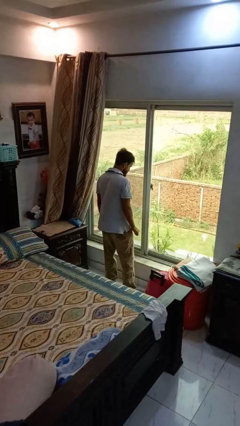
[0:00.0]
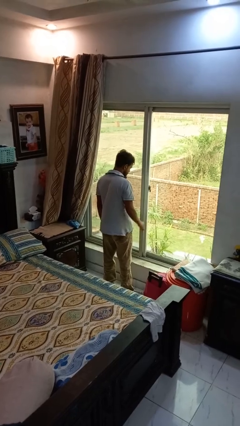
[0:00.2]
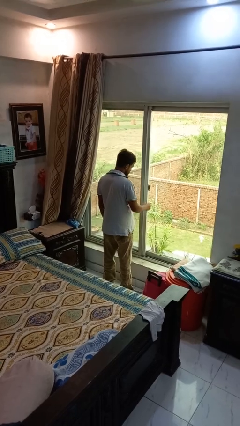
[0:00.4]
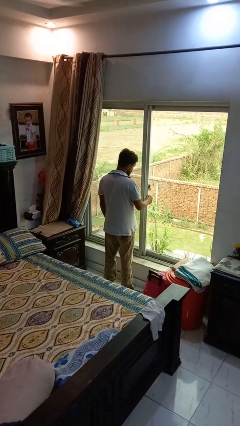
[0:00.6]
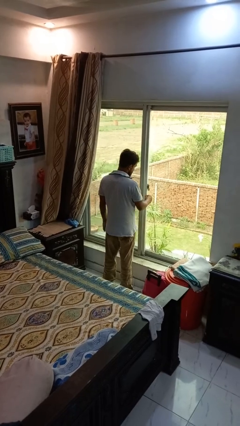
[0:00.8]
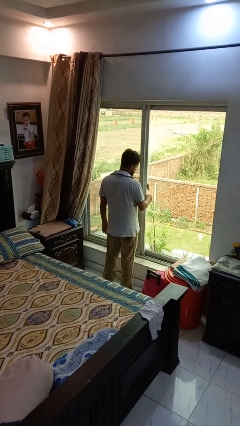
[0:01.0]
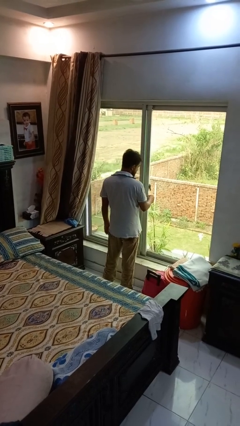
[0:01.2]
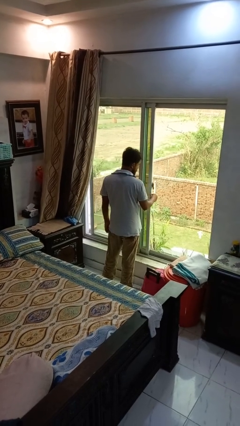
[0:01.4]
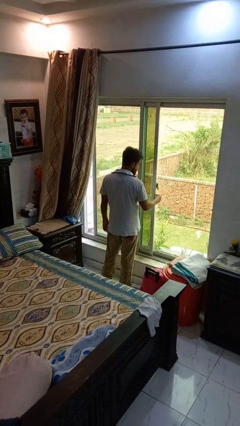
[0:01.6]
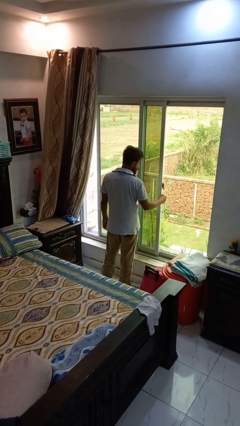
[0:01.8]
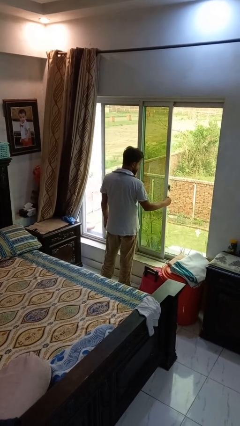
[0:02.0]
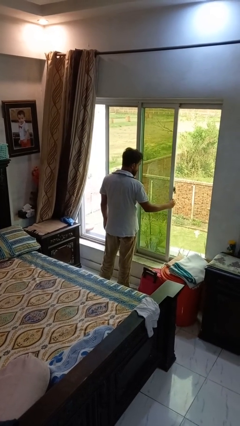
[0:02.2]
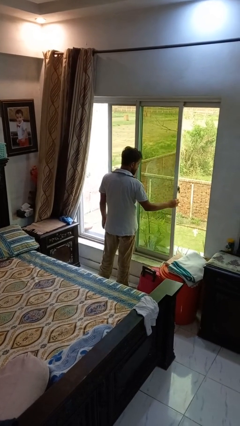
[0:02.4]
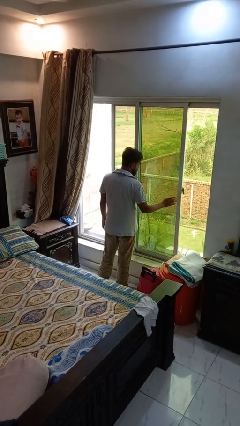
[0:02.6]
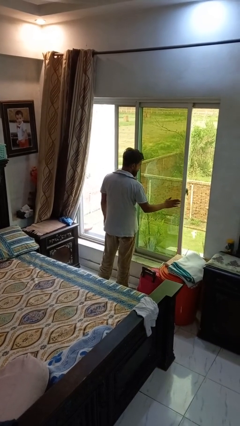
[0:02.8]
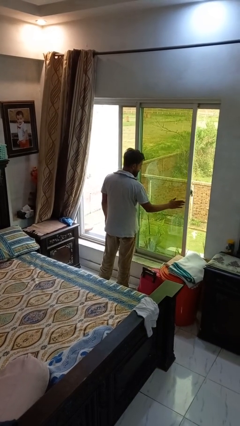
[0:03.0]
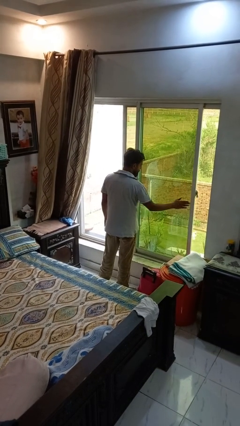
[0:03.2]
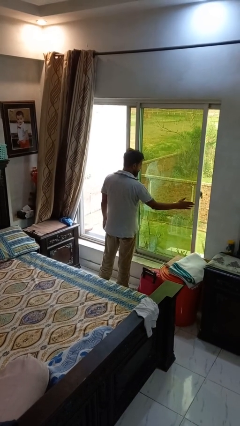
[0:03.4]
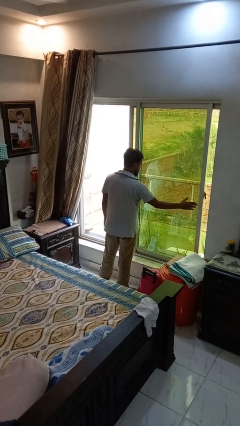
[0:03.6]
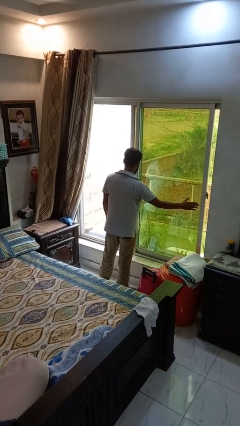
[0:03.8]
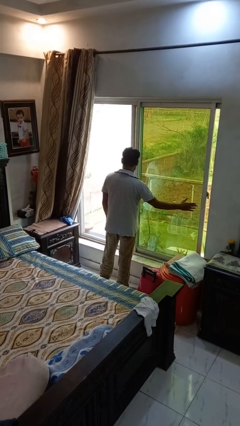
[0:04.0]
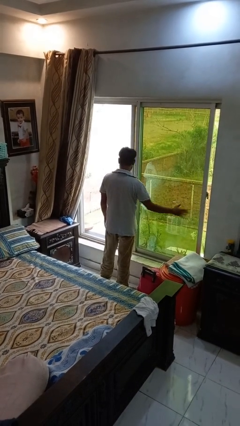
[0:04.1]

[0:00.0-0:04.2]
person opens sliding door

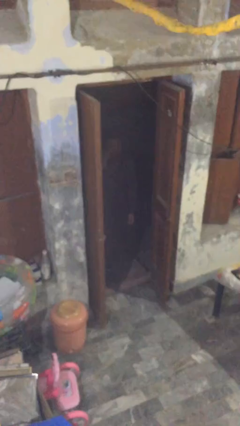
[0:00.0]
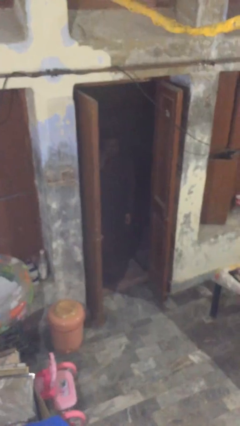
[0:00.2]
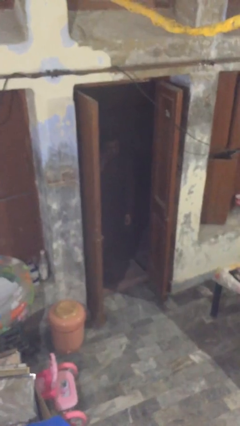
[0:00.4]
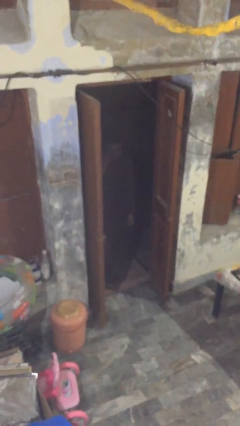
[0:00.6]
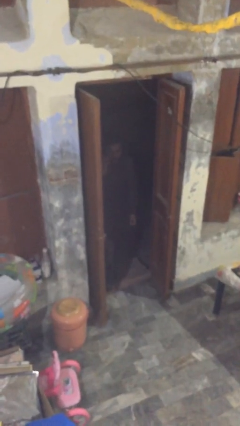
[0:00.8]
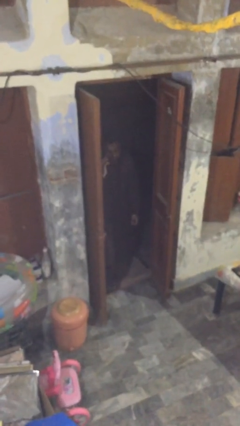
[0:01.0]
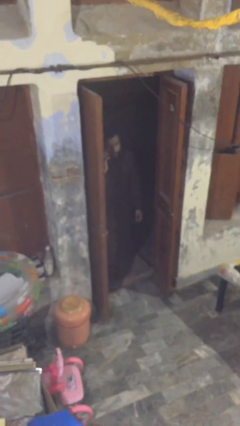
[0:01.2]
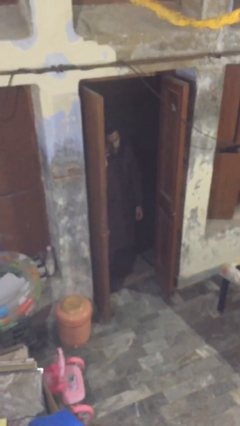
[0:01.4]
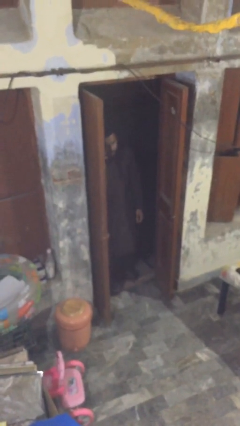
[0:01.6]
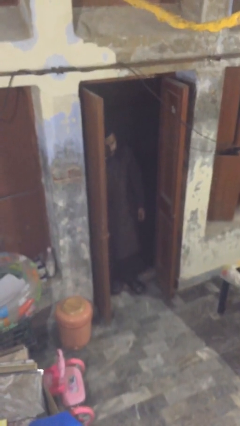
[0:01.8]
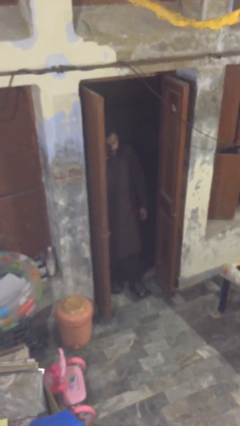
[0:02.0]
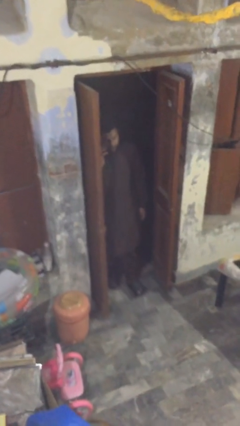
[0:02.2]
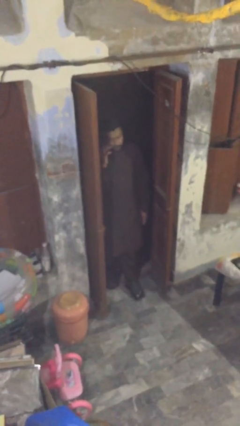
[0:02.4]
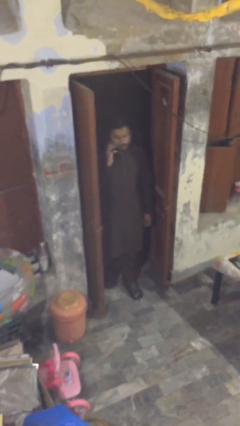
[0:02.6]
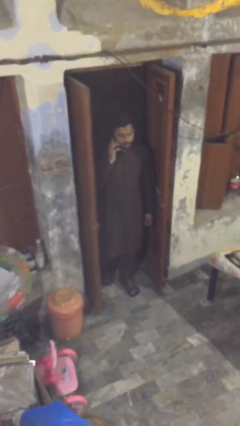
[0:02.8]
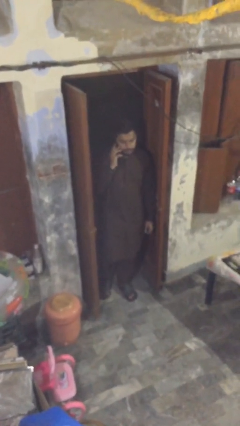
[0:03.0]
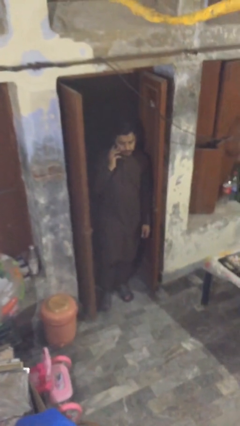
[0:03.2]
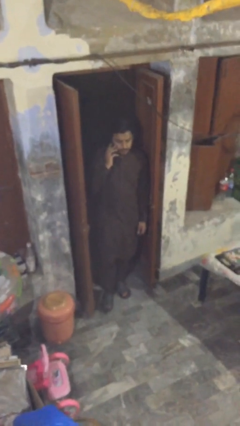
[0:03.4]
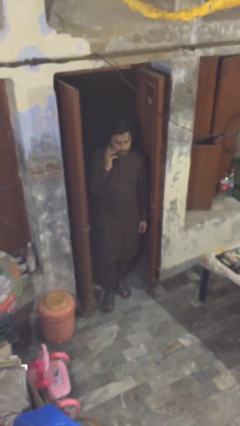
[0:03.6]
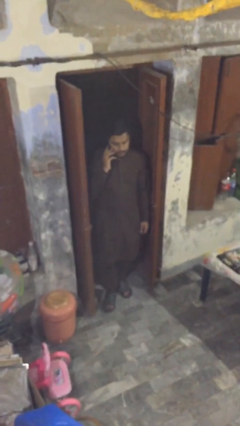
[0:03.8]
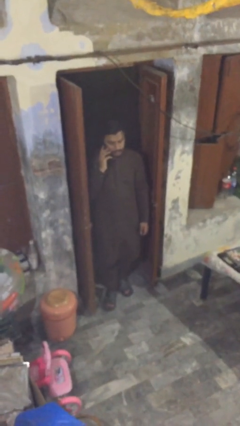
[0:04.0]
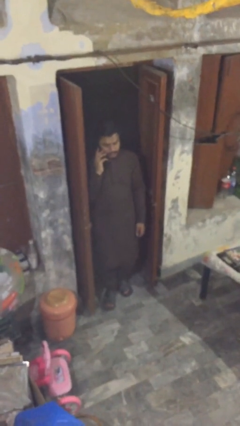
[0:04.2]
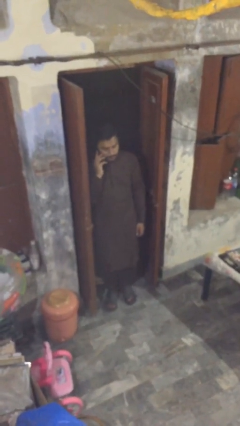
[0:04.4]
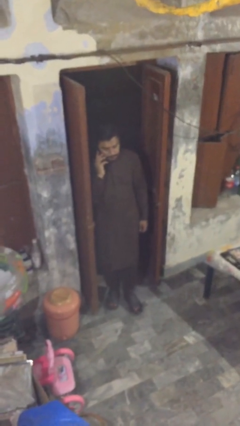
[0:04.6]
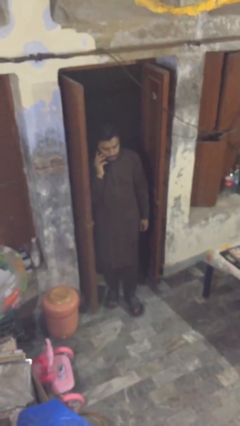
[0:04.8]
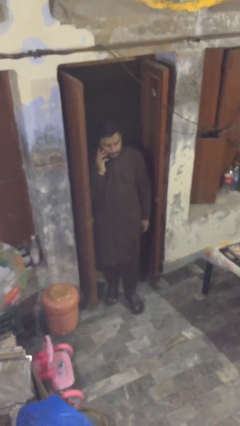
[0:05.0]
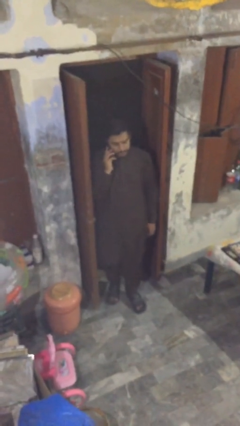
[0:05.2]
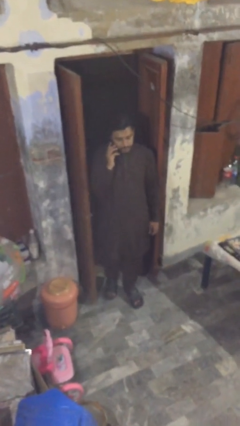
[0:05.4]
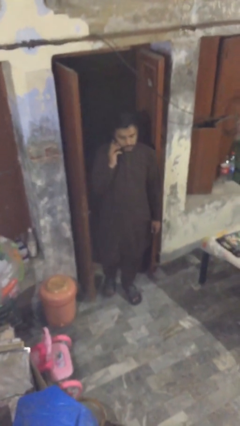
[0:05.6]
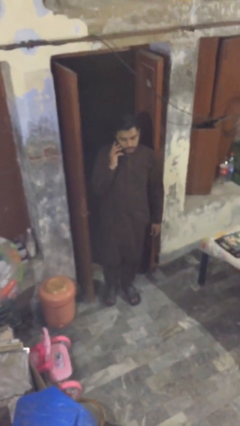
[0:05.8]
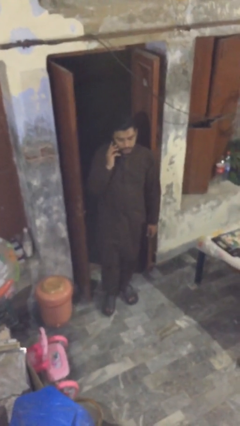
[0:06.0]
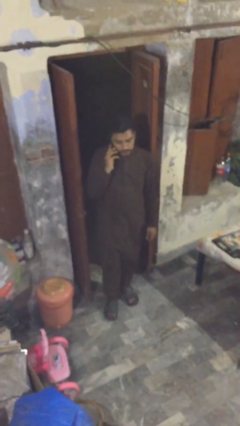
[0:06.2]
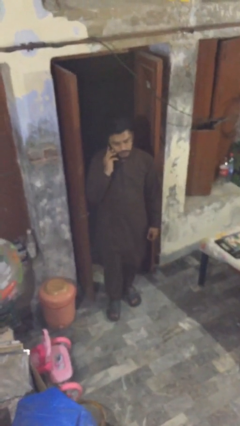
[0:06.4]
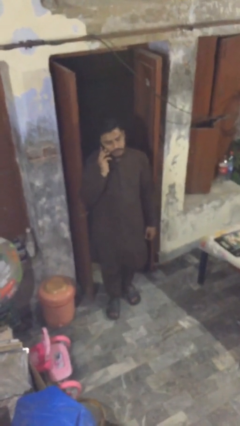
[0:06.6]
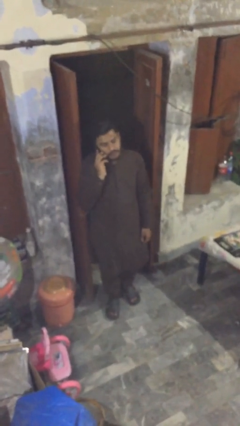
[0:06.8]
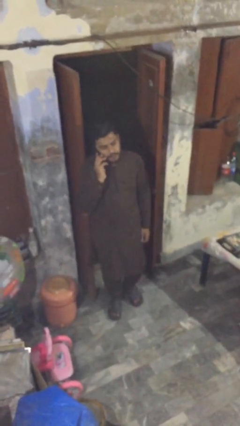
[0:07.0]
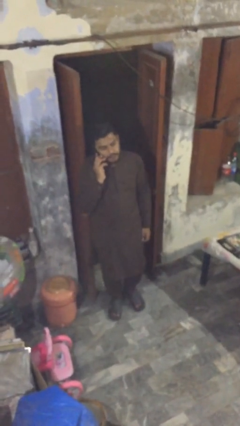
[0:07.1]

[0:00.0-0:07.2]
person enters scene through structure

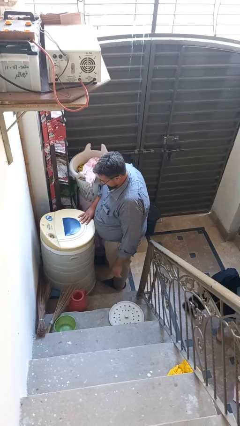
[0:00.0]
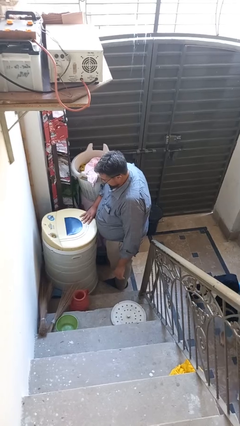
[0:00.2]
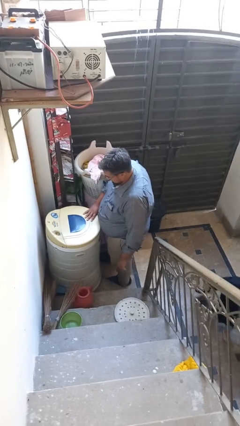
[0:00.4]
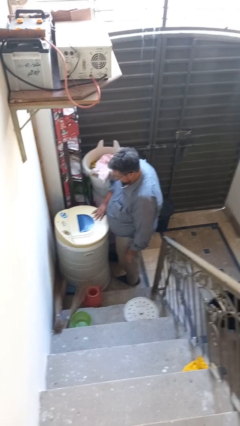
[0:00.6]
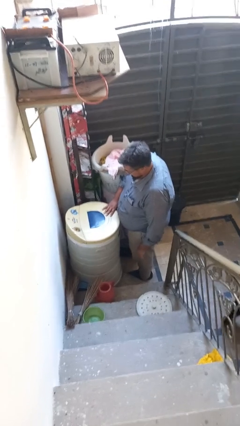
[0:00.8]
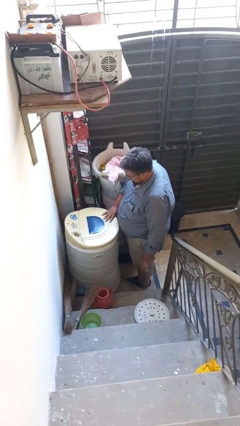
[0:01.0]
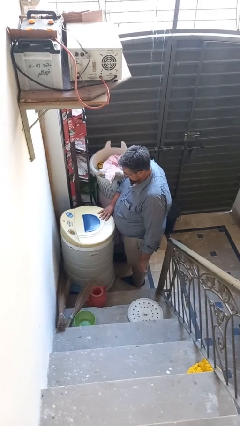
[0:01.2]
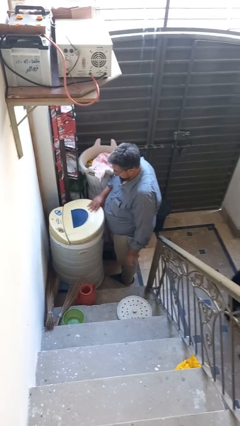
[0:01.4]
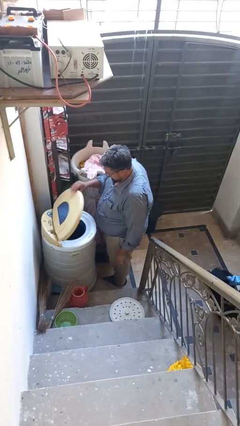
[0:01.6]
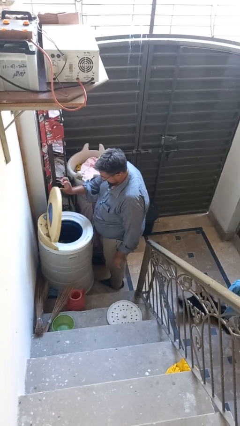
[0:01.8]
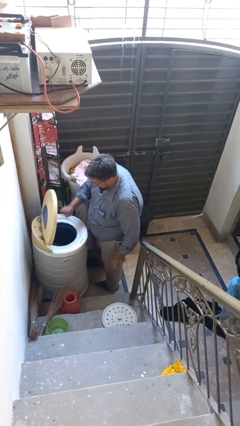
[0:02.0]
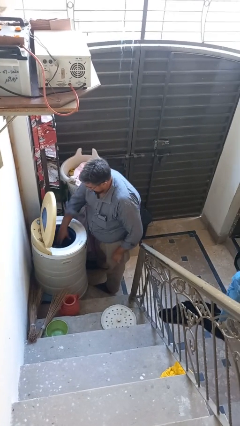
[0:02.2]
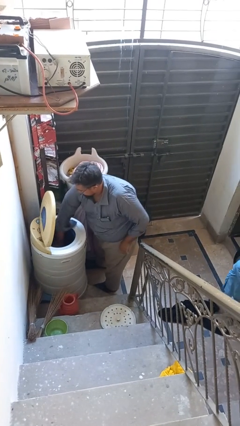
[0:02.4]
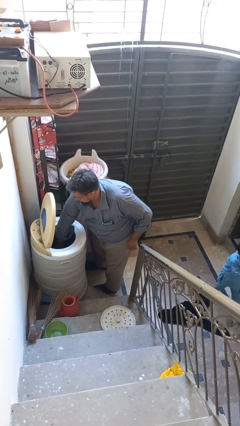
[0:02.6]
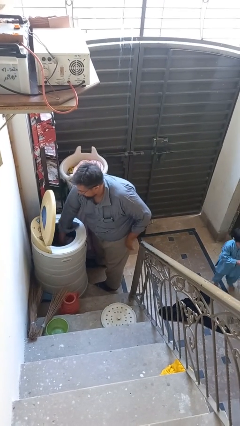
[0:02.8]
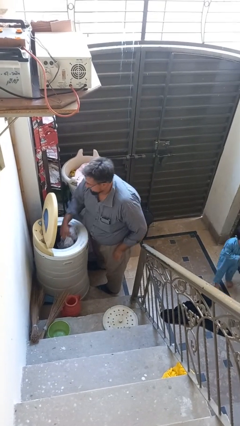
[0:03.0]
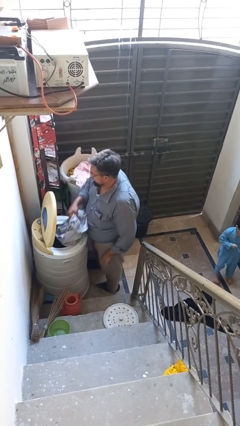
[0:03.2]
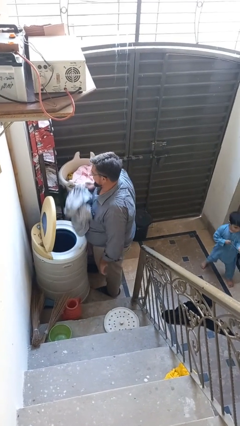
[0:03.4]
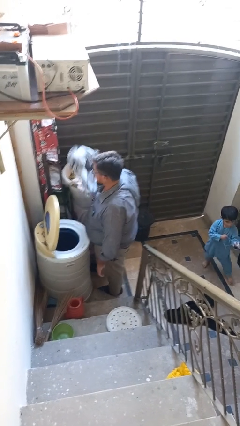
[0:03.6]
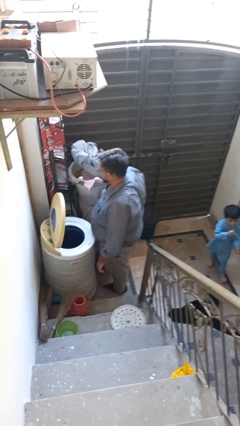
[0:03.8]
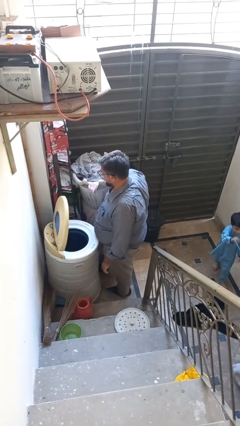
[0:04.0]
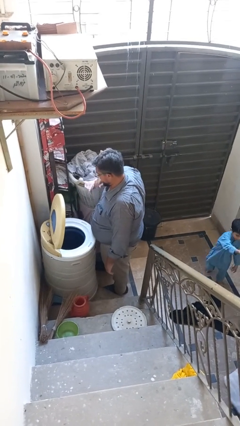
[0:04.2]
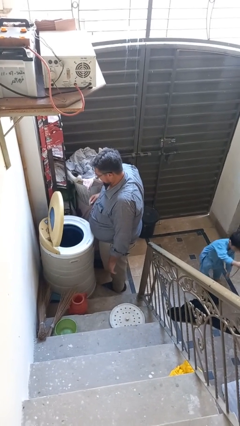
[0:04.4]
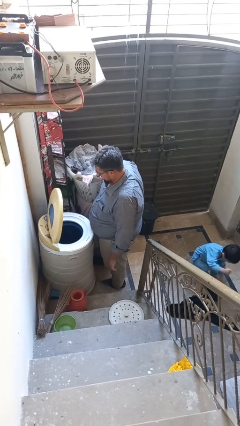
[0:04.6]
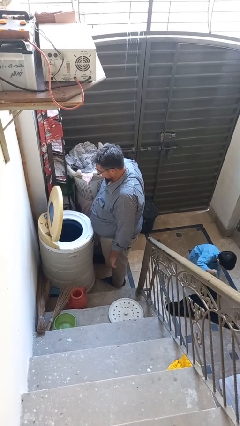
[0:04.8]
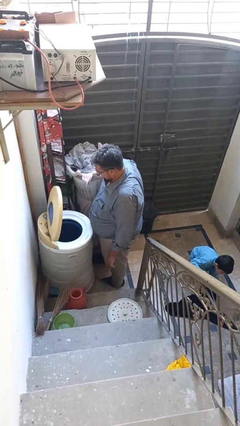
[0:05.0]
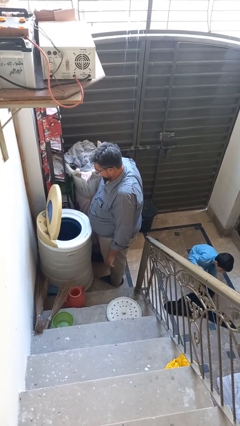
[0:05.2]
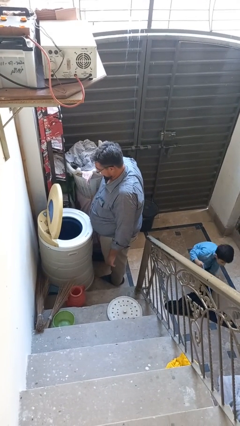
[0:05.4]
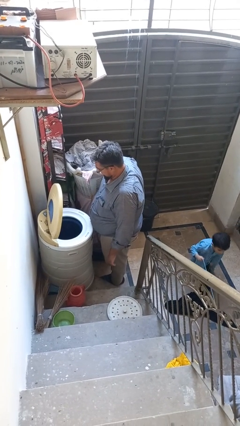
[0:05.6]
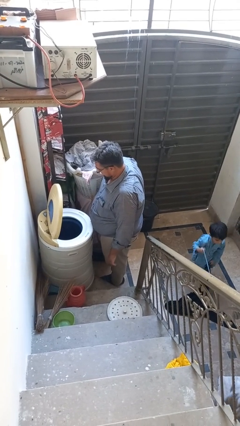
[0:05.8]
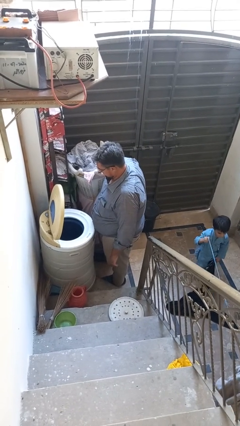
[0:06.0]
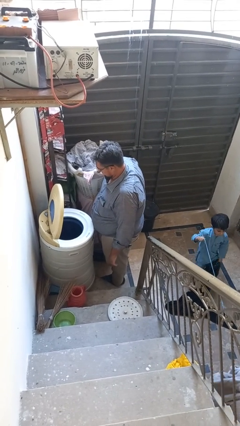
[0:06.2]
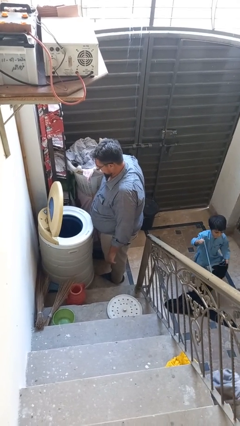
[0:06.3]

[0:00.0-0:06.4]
person unloads clotheswasher
